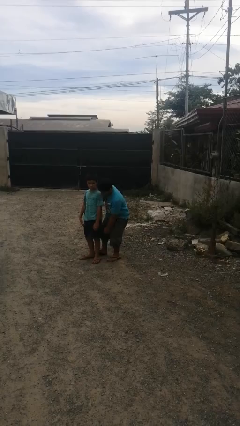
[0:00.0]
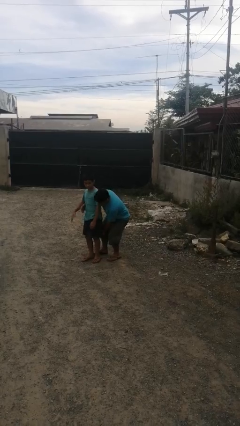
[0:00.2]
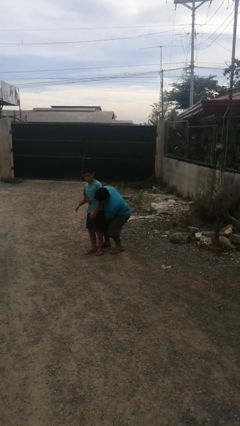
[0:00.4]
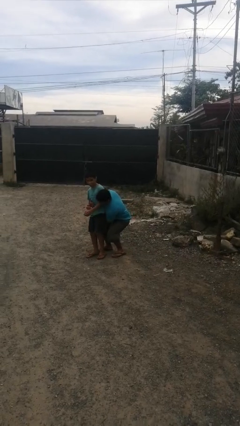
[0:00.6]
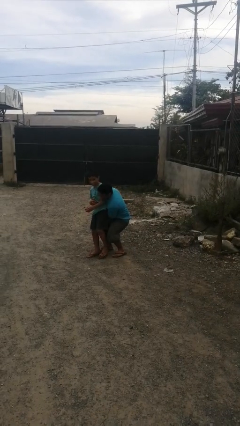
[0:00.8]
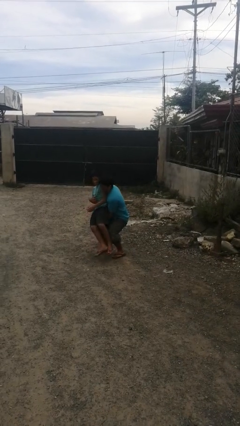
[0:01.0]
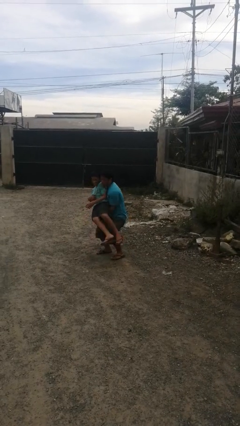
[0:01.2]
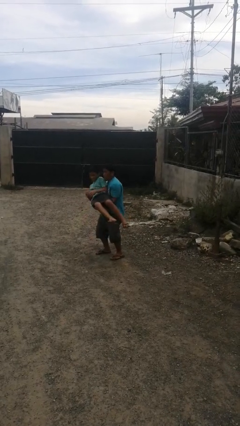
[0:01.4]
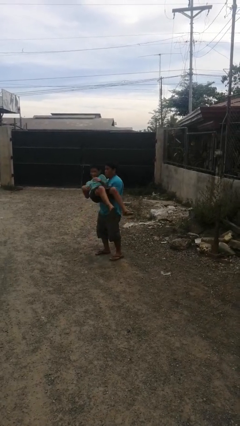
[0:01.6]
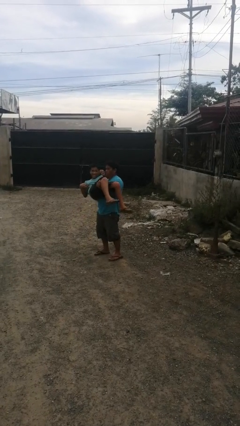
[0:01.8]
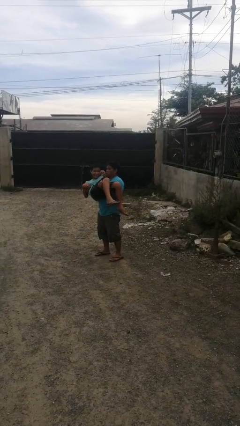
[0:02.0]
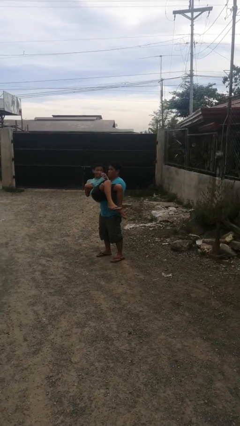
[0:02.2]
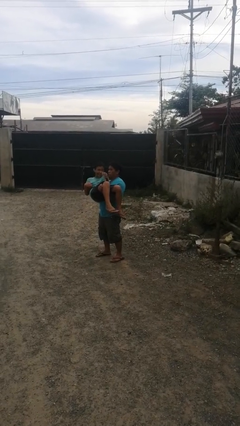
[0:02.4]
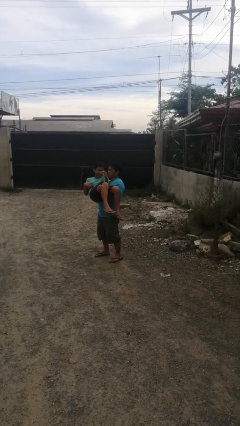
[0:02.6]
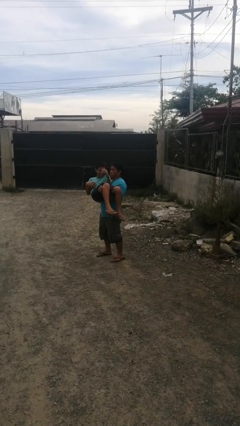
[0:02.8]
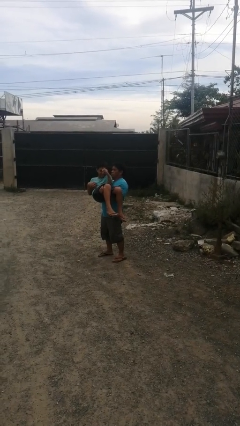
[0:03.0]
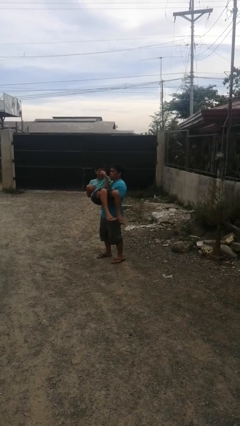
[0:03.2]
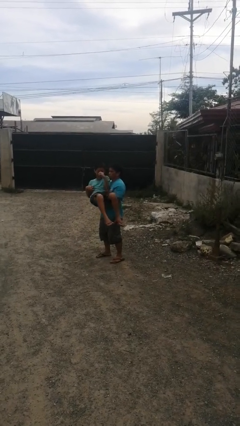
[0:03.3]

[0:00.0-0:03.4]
person picks up person

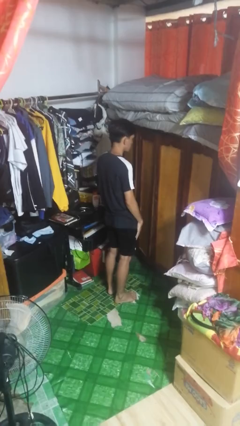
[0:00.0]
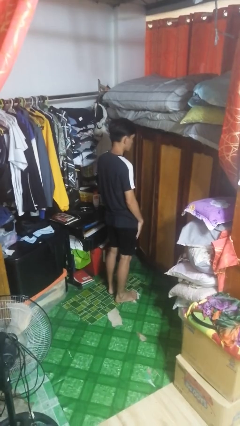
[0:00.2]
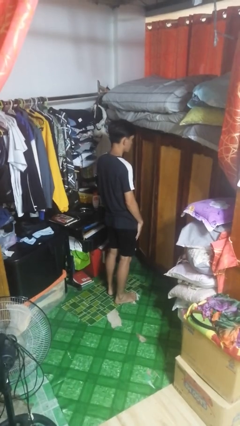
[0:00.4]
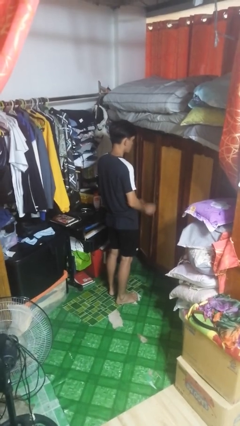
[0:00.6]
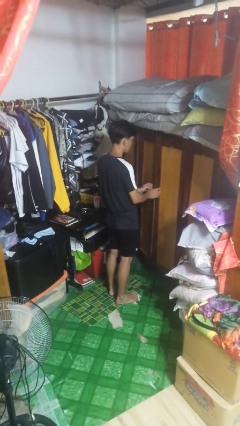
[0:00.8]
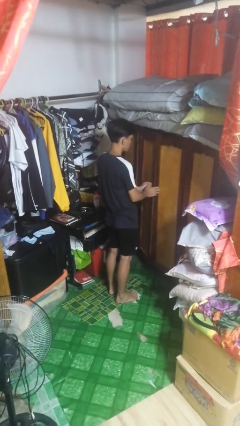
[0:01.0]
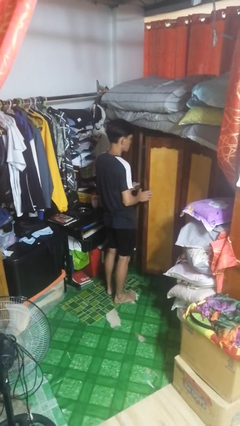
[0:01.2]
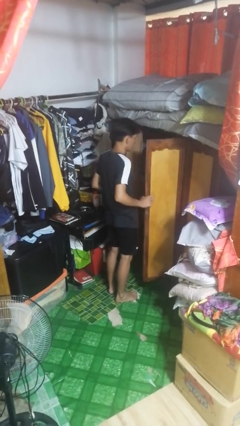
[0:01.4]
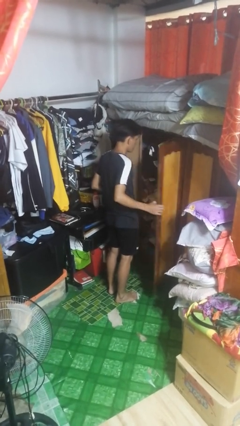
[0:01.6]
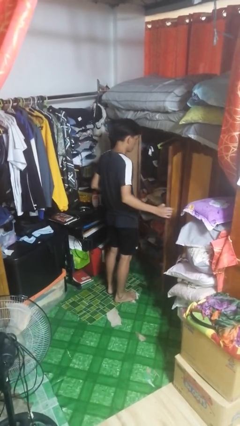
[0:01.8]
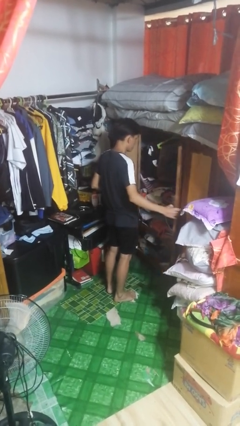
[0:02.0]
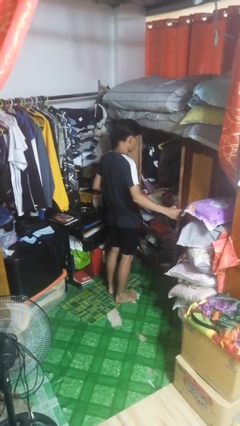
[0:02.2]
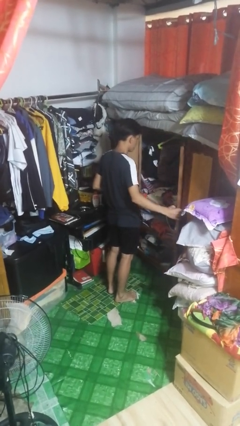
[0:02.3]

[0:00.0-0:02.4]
person opens dresser drawer

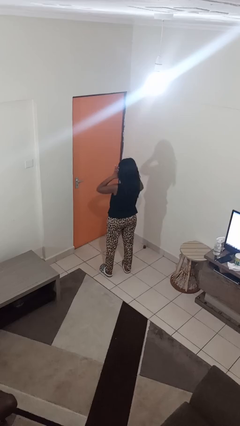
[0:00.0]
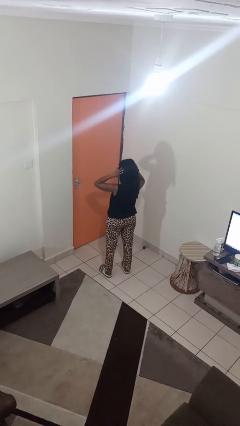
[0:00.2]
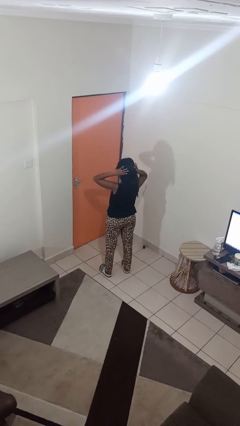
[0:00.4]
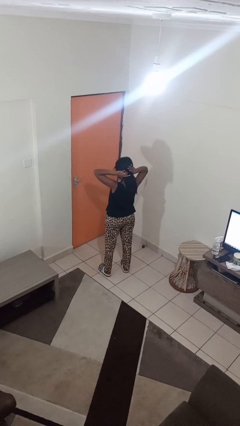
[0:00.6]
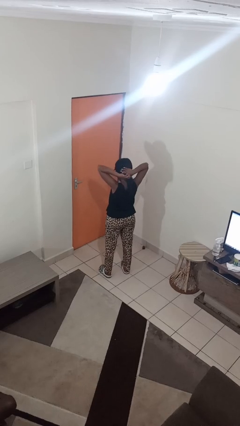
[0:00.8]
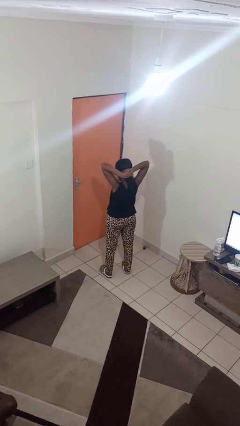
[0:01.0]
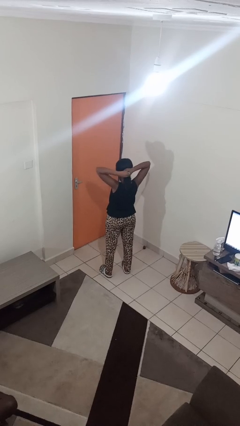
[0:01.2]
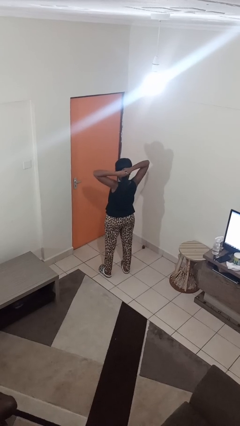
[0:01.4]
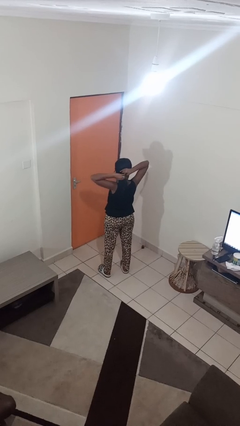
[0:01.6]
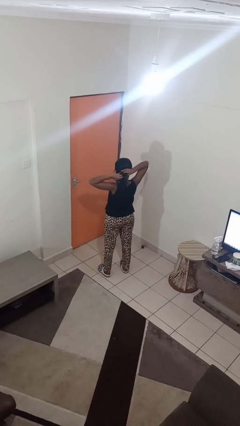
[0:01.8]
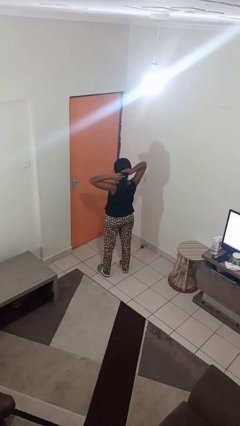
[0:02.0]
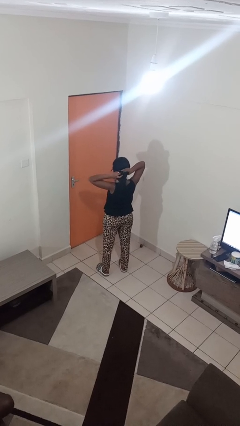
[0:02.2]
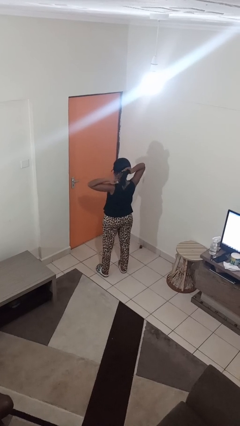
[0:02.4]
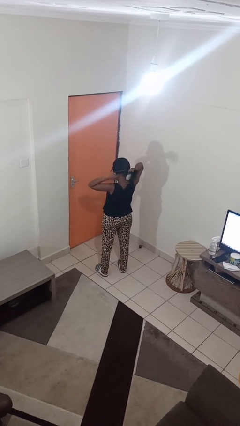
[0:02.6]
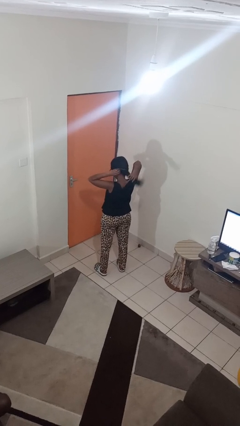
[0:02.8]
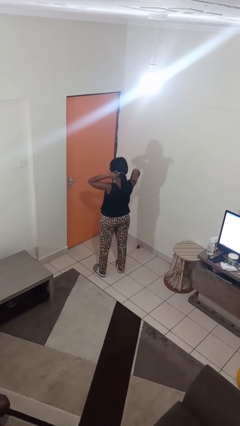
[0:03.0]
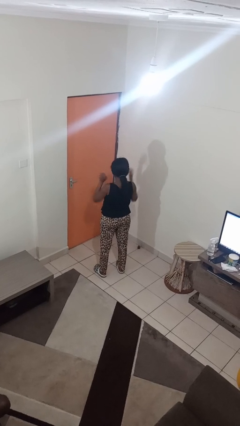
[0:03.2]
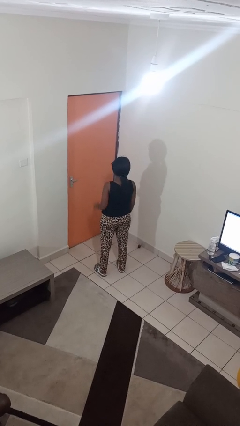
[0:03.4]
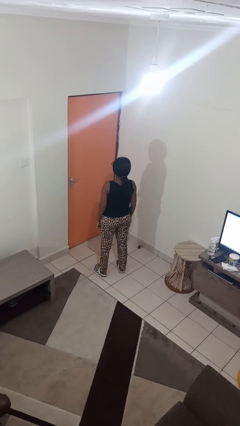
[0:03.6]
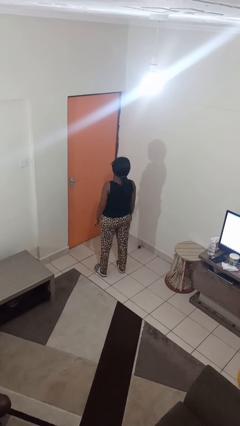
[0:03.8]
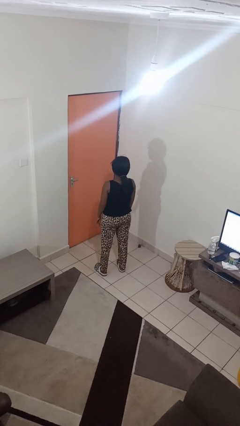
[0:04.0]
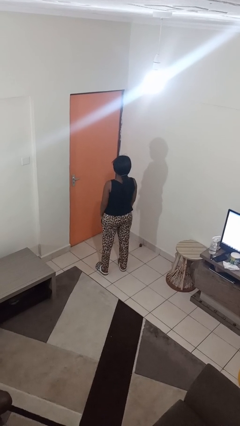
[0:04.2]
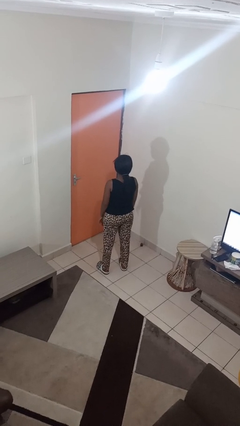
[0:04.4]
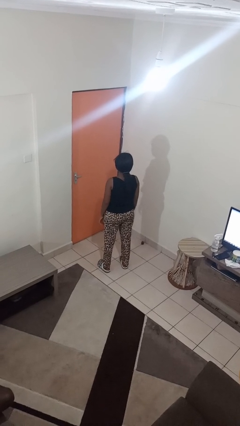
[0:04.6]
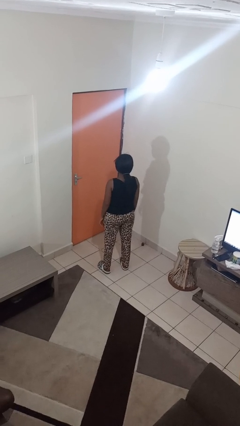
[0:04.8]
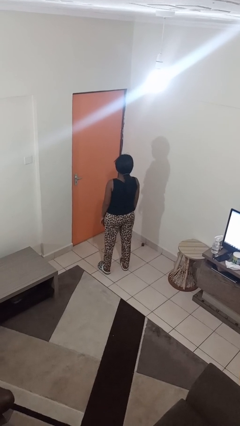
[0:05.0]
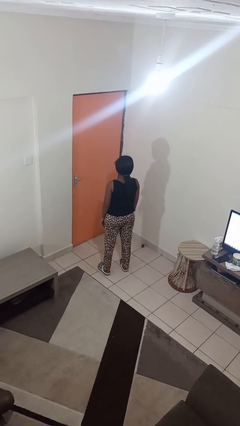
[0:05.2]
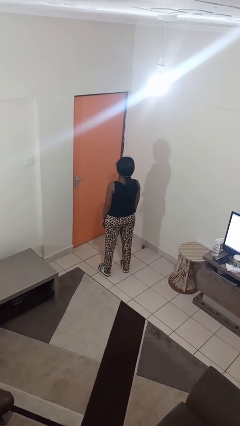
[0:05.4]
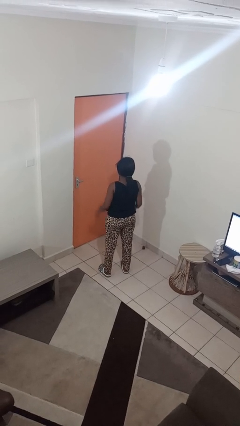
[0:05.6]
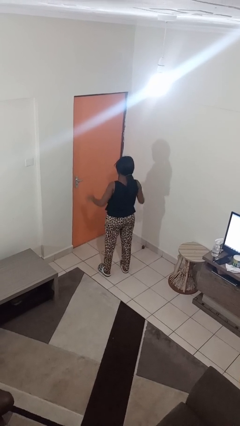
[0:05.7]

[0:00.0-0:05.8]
person puts hair in ponytail

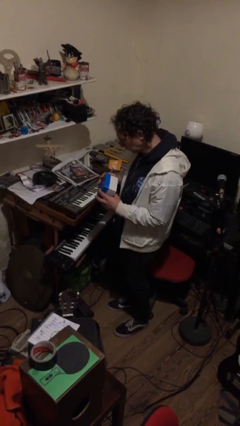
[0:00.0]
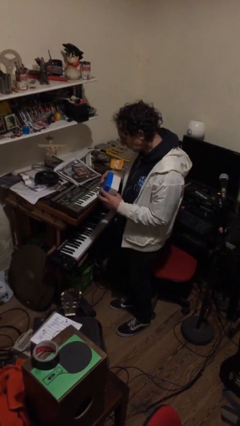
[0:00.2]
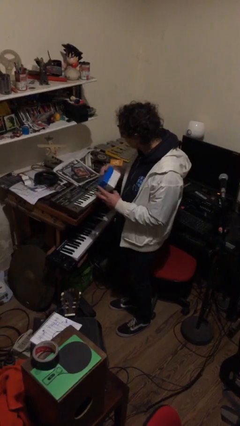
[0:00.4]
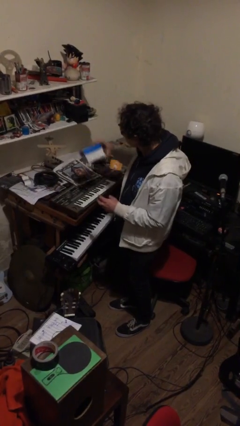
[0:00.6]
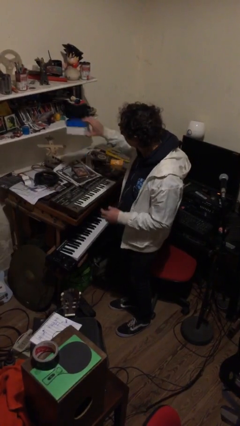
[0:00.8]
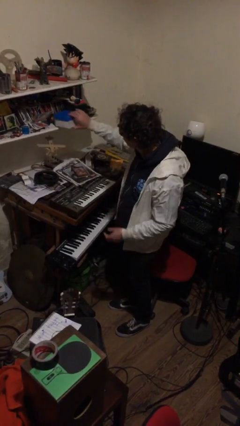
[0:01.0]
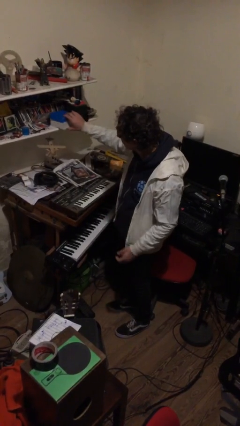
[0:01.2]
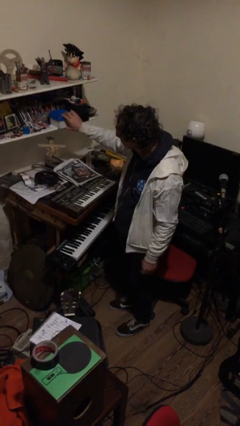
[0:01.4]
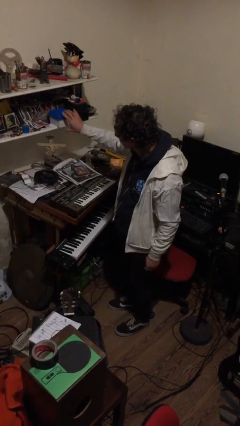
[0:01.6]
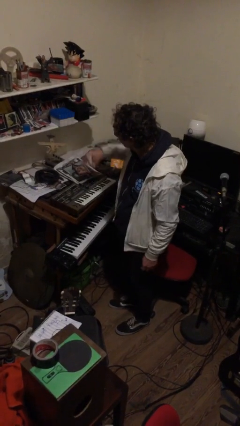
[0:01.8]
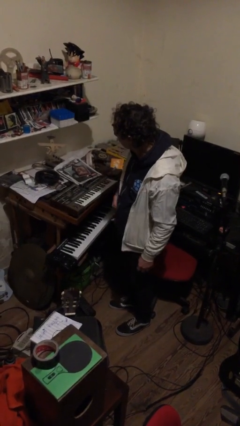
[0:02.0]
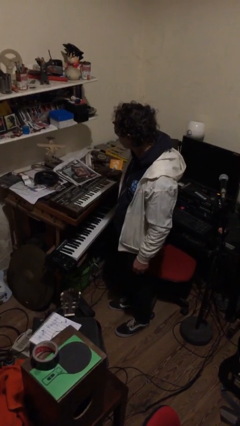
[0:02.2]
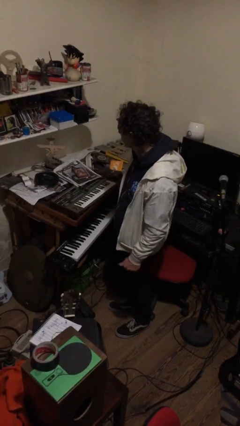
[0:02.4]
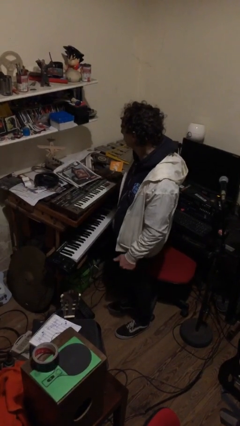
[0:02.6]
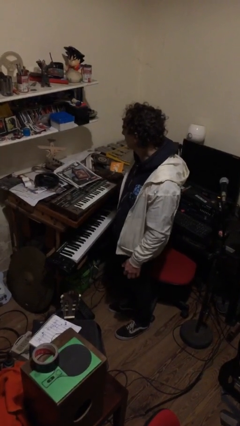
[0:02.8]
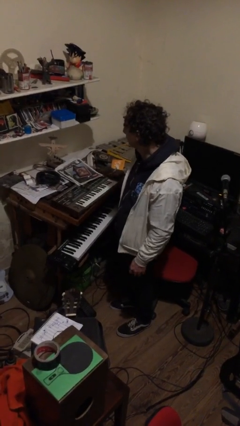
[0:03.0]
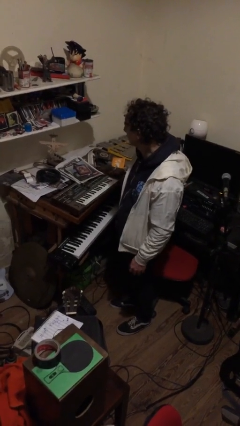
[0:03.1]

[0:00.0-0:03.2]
person puts down object on countertop

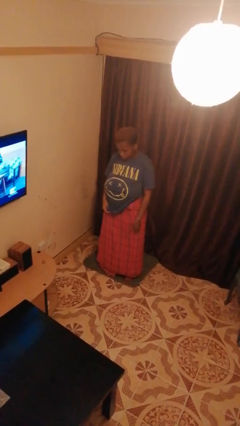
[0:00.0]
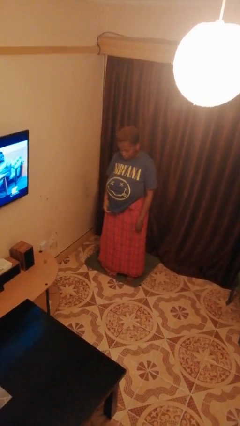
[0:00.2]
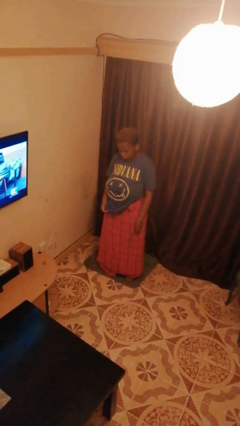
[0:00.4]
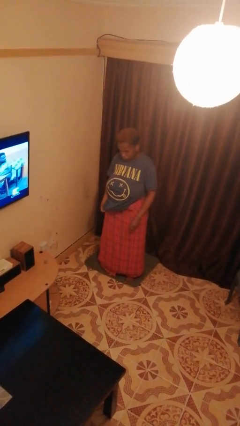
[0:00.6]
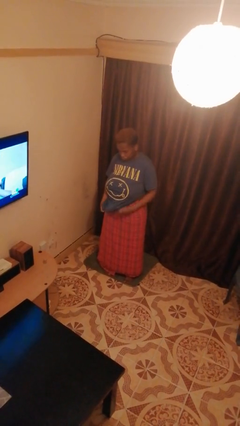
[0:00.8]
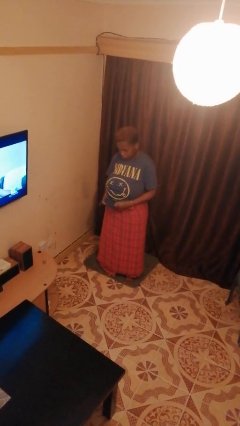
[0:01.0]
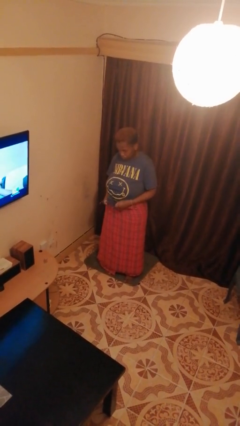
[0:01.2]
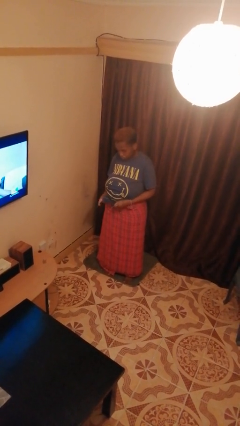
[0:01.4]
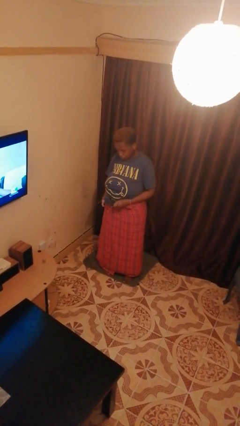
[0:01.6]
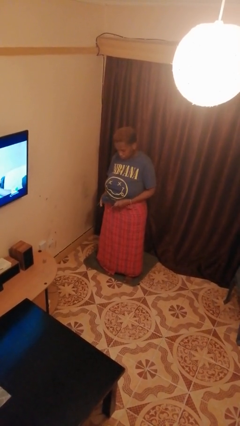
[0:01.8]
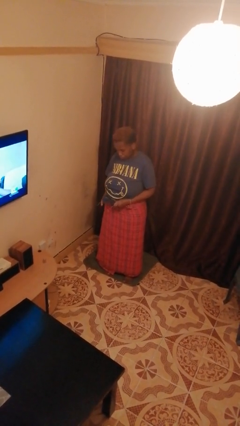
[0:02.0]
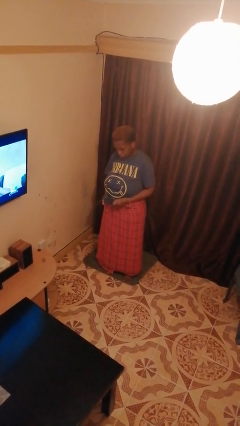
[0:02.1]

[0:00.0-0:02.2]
person cleans eyeglasses

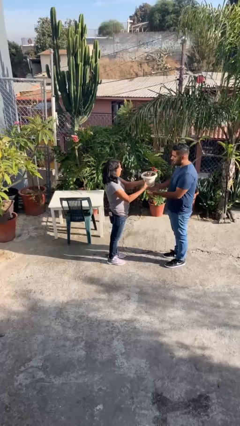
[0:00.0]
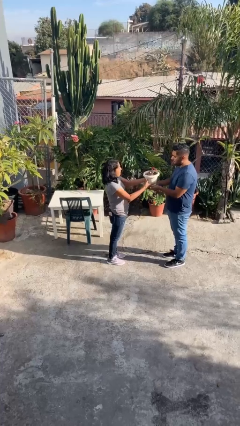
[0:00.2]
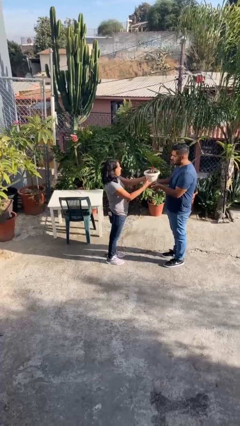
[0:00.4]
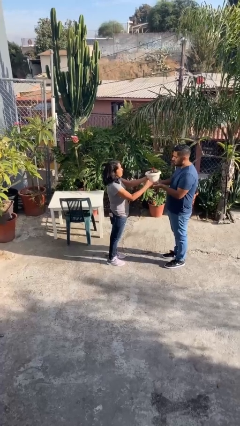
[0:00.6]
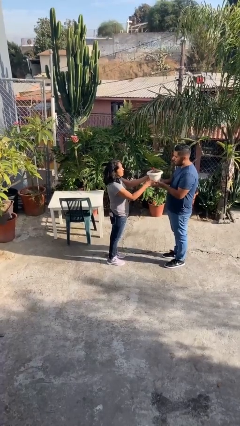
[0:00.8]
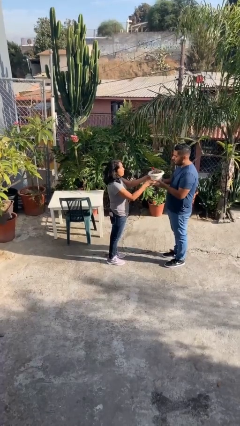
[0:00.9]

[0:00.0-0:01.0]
person transfers object to person
